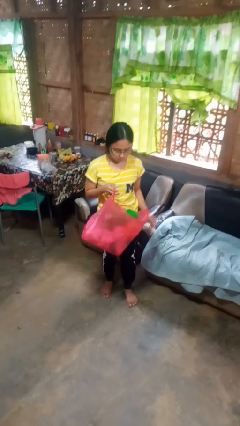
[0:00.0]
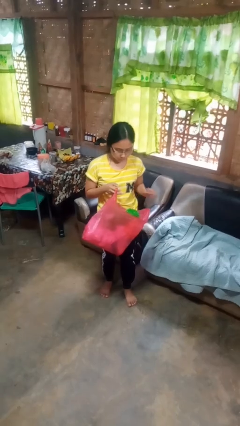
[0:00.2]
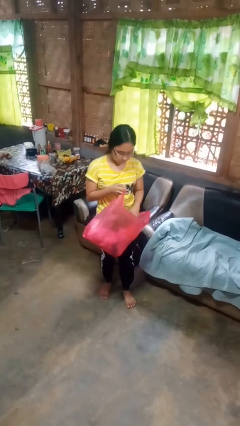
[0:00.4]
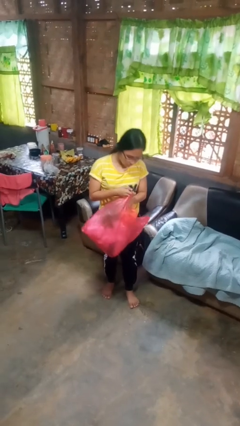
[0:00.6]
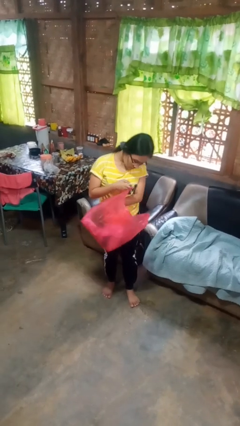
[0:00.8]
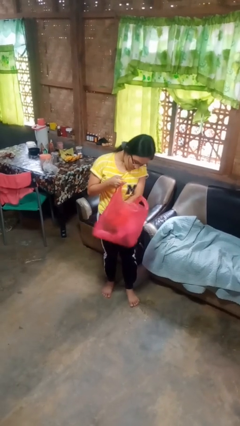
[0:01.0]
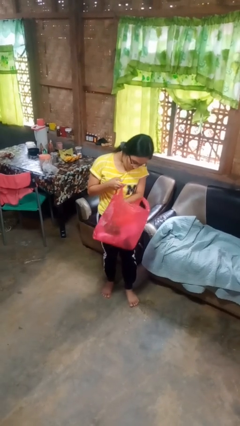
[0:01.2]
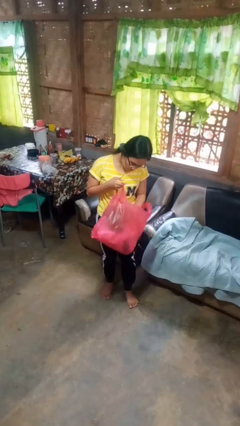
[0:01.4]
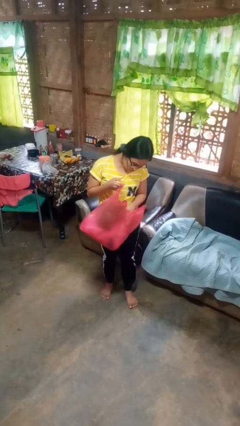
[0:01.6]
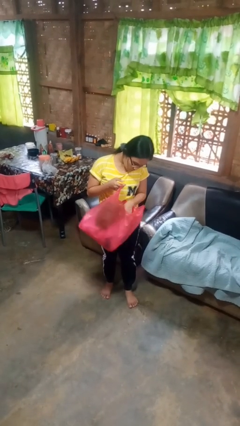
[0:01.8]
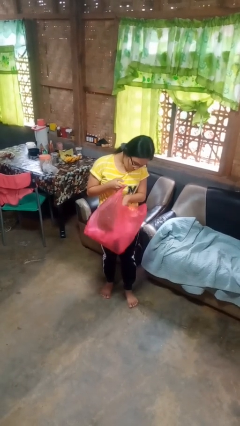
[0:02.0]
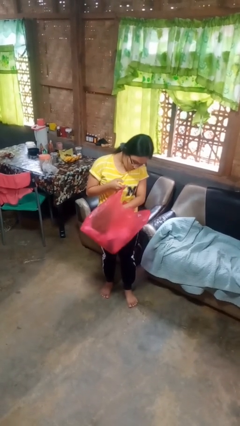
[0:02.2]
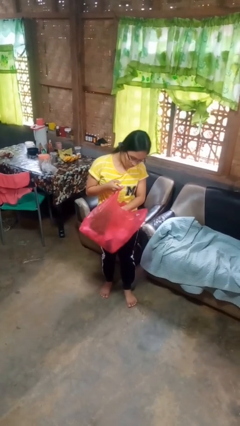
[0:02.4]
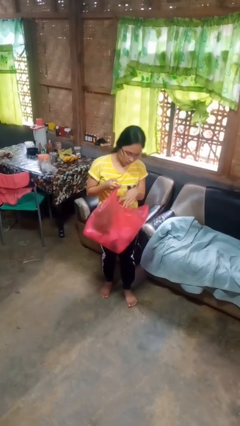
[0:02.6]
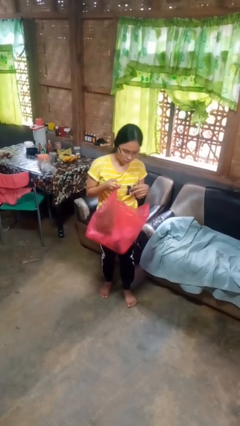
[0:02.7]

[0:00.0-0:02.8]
person searches in bag

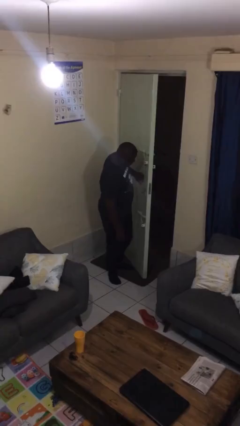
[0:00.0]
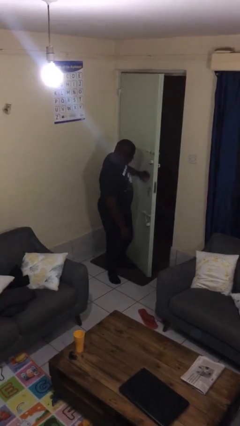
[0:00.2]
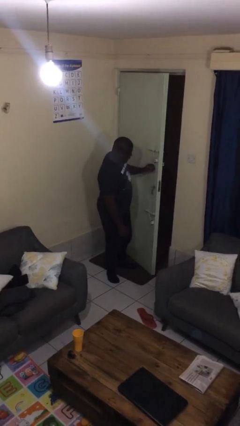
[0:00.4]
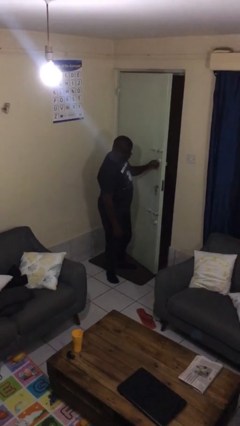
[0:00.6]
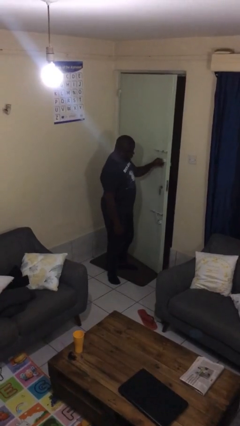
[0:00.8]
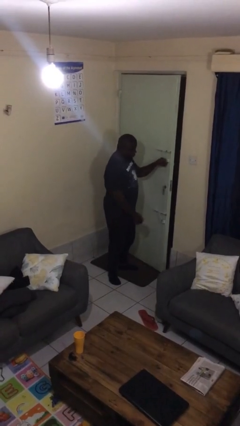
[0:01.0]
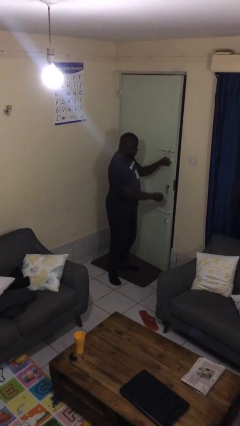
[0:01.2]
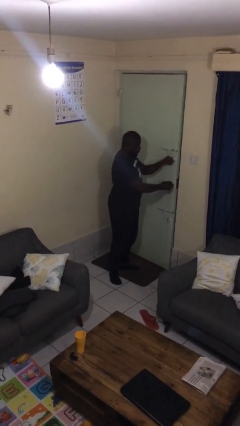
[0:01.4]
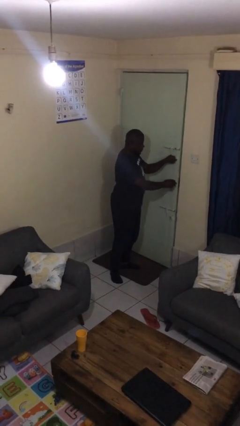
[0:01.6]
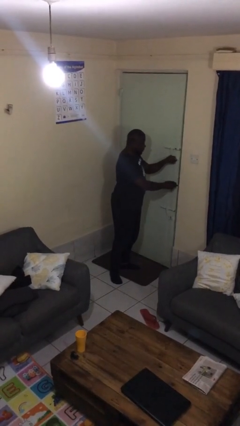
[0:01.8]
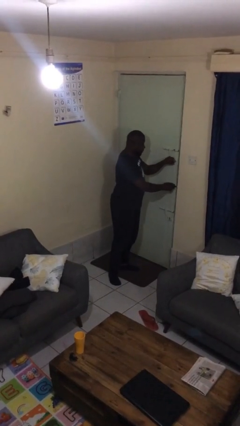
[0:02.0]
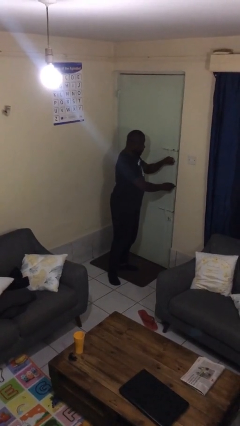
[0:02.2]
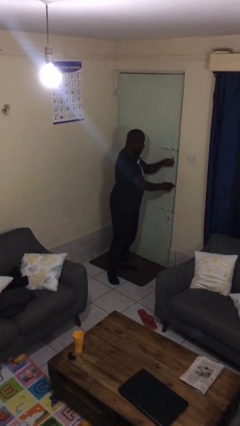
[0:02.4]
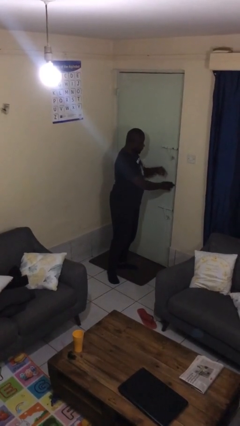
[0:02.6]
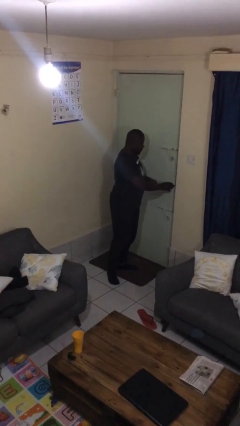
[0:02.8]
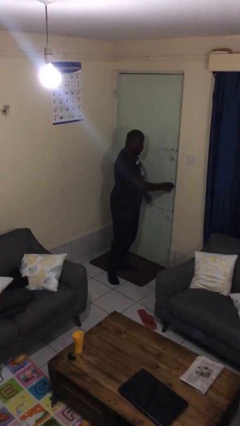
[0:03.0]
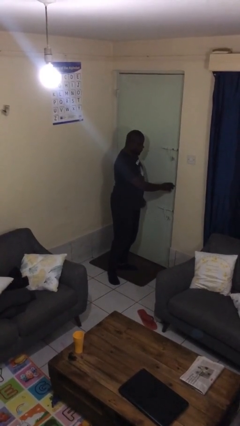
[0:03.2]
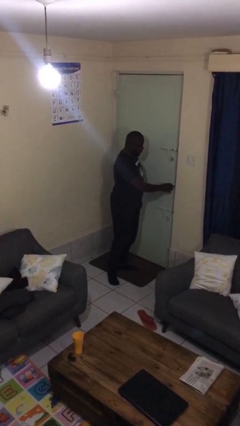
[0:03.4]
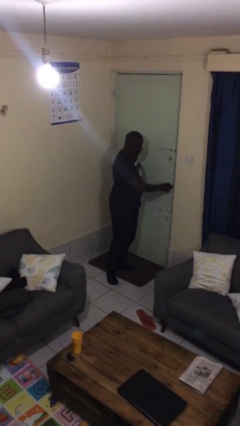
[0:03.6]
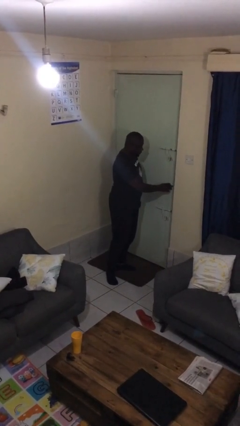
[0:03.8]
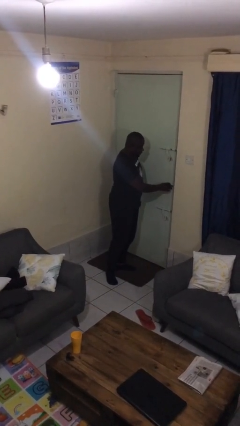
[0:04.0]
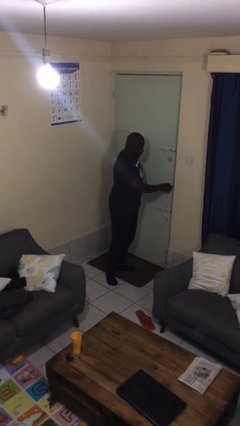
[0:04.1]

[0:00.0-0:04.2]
person closes facility door

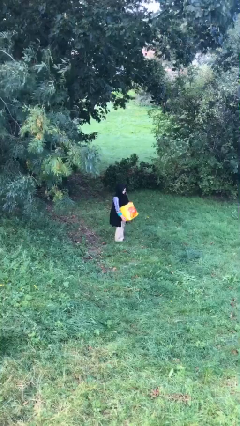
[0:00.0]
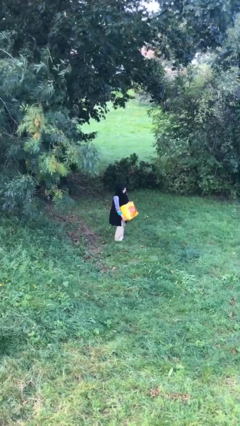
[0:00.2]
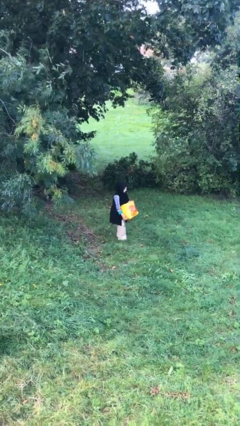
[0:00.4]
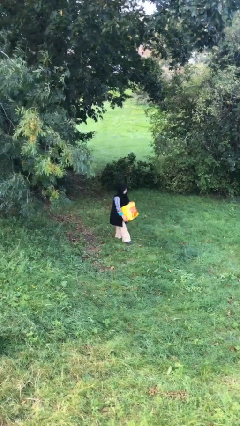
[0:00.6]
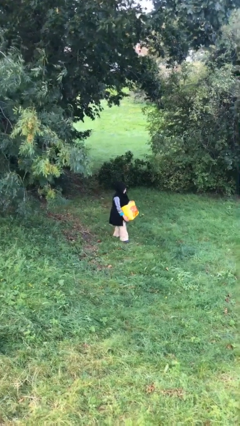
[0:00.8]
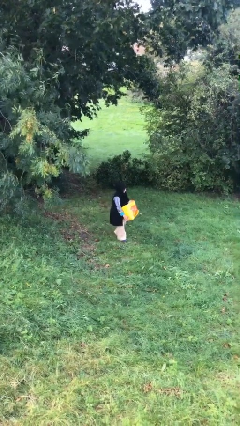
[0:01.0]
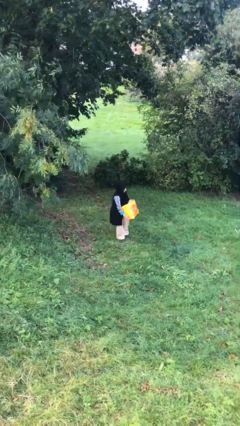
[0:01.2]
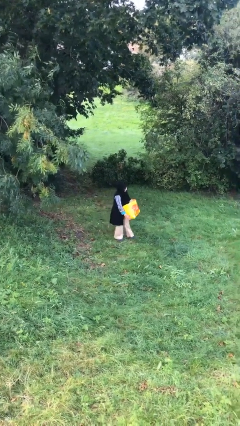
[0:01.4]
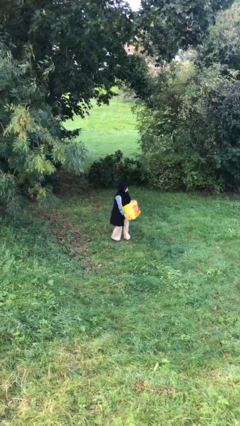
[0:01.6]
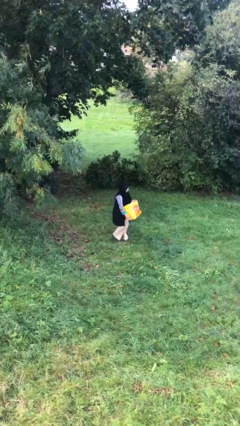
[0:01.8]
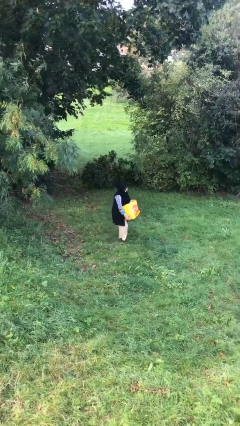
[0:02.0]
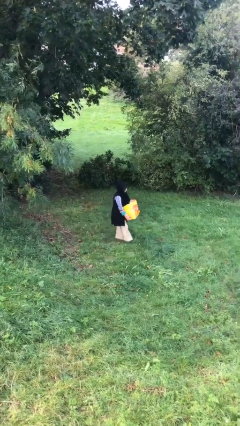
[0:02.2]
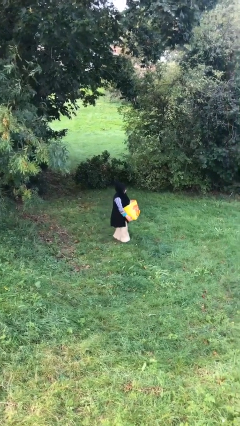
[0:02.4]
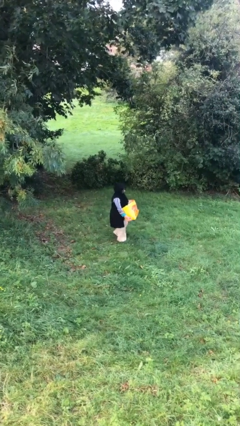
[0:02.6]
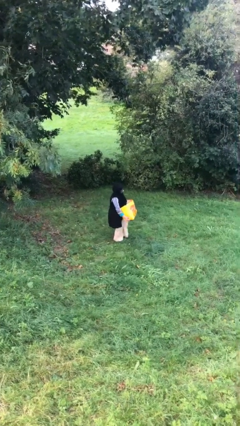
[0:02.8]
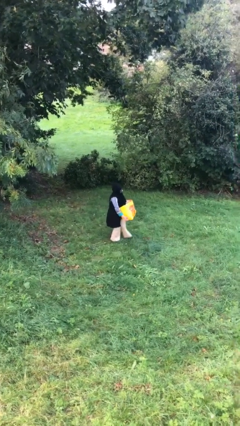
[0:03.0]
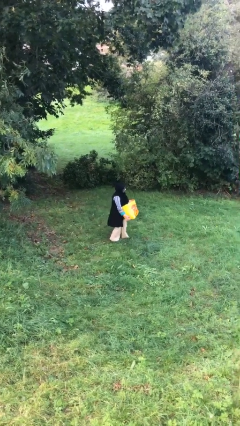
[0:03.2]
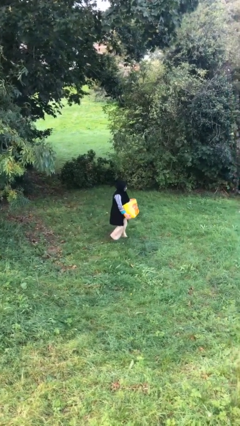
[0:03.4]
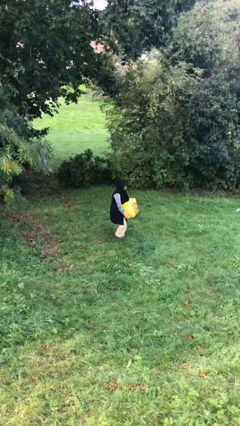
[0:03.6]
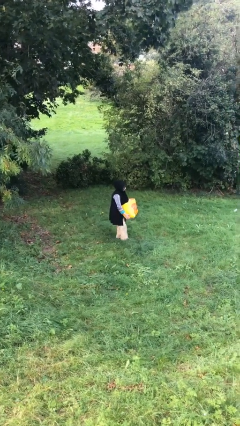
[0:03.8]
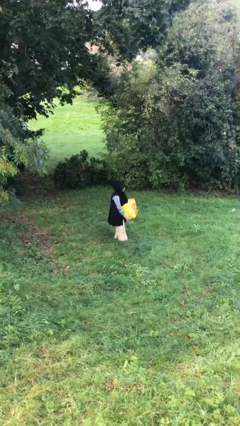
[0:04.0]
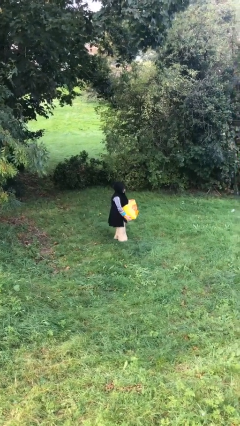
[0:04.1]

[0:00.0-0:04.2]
person carries heavy object

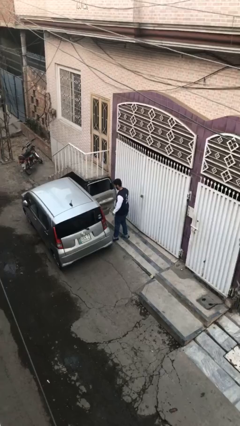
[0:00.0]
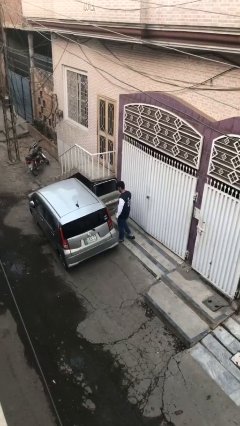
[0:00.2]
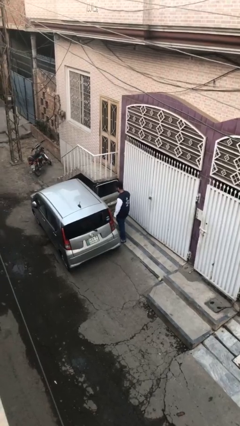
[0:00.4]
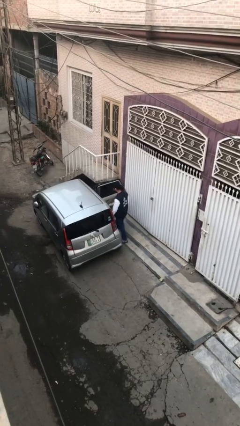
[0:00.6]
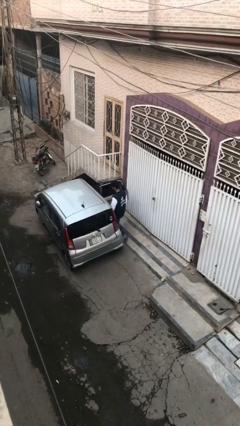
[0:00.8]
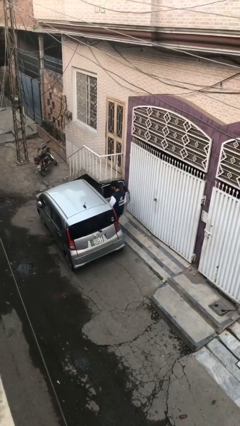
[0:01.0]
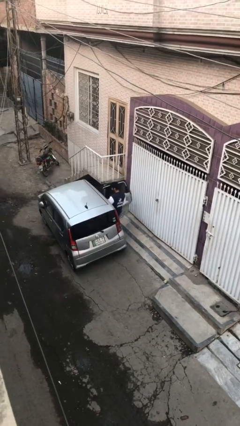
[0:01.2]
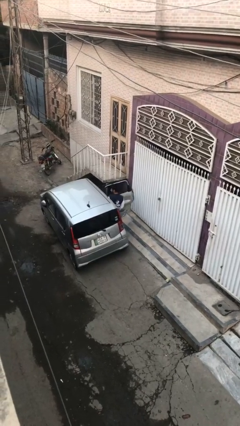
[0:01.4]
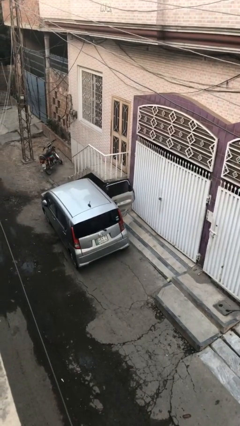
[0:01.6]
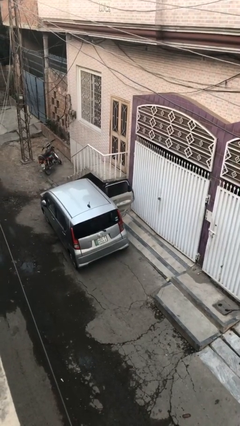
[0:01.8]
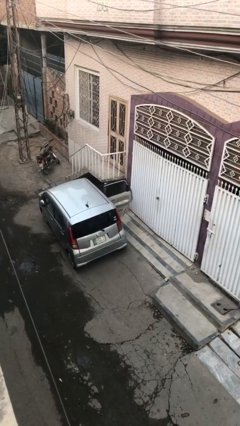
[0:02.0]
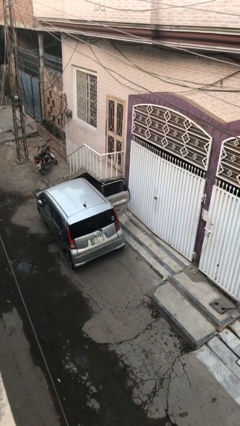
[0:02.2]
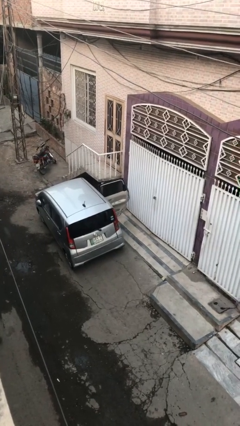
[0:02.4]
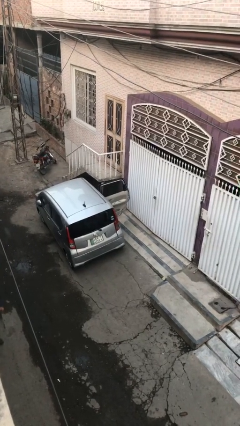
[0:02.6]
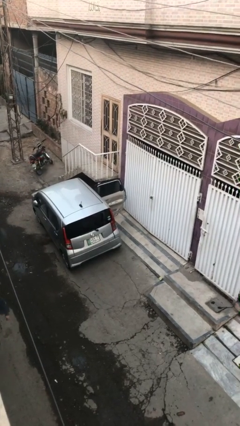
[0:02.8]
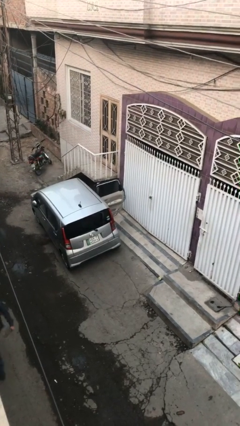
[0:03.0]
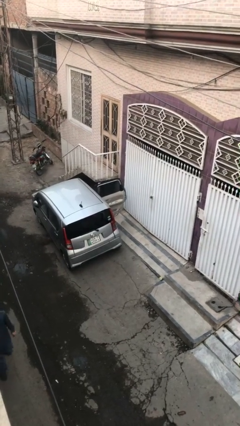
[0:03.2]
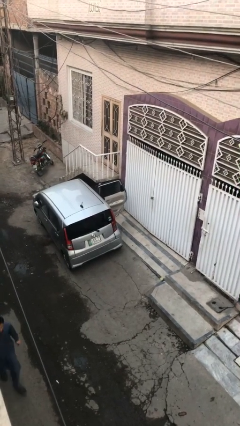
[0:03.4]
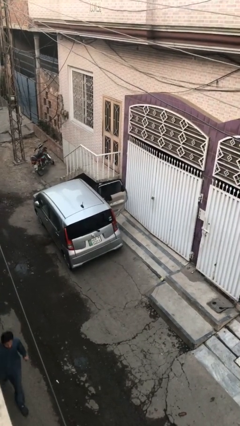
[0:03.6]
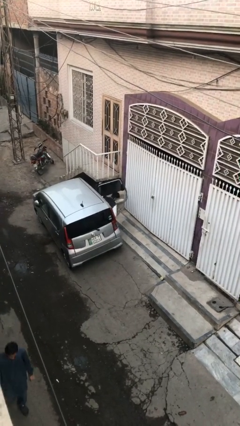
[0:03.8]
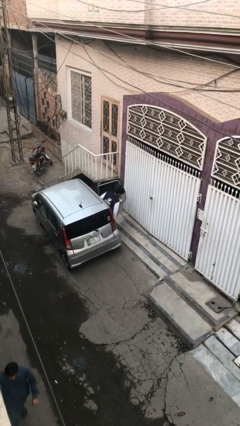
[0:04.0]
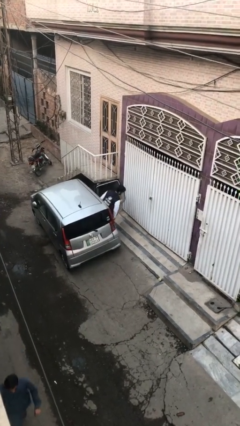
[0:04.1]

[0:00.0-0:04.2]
person enters car

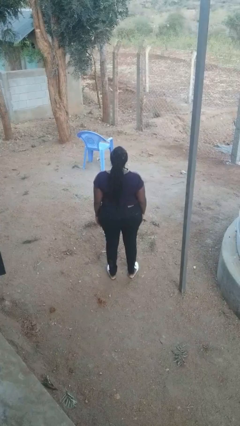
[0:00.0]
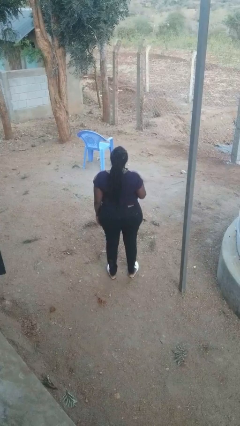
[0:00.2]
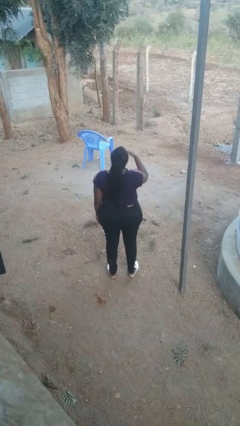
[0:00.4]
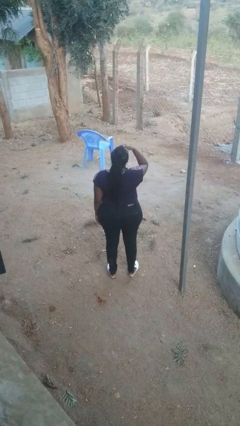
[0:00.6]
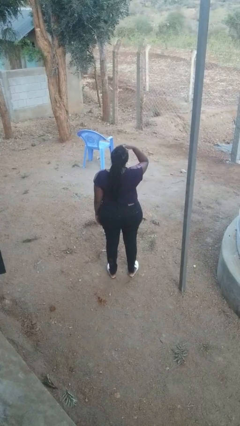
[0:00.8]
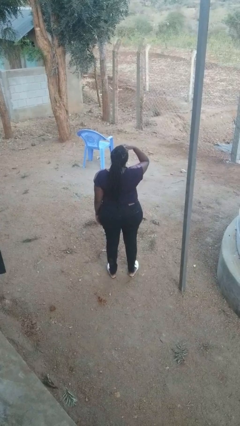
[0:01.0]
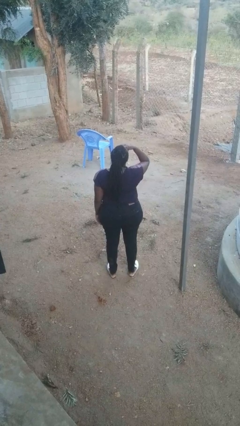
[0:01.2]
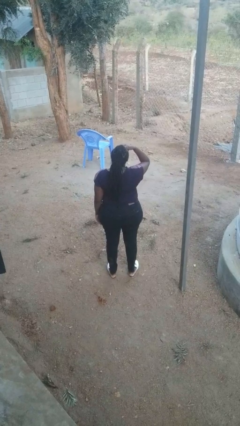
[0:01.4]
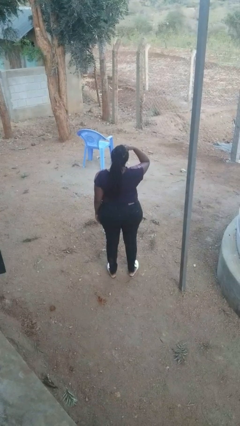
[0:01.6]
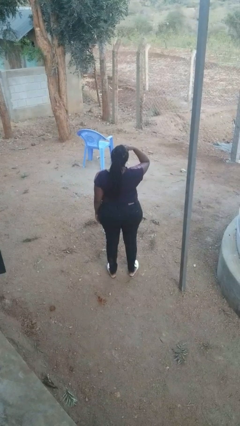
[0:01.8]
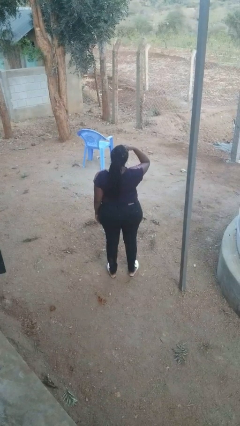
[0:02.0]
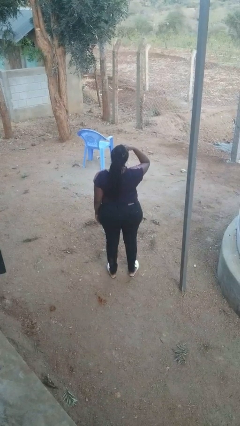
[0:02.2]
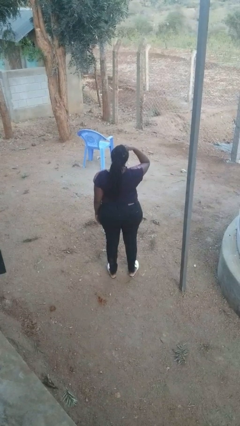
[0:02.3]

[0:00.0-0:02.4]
person shades eyes
